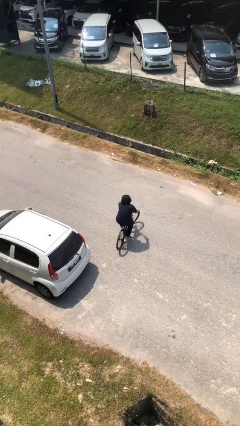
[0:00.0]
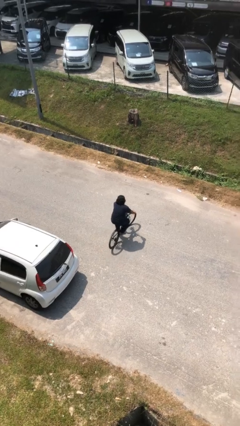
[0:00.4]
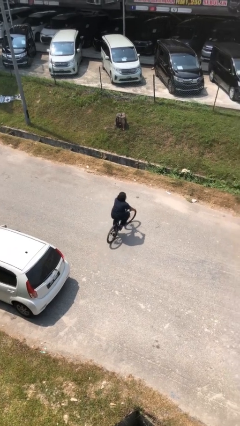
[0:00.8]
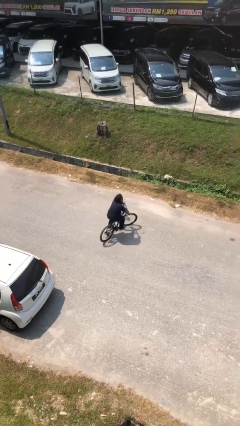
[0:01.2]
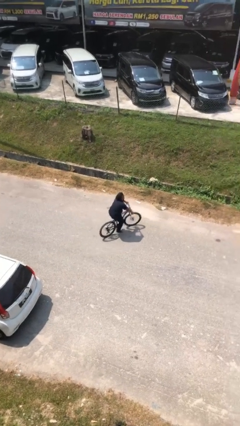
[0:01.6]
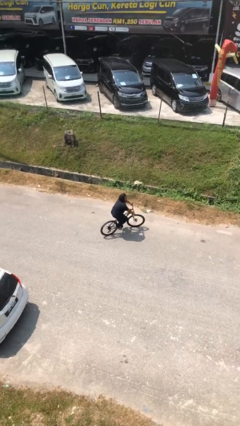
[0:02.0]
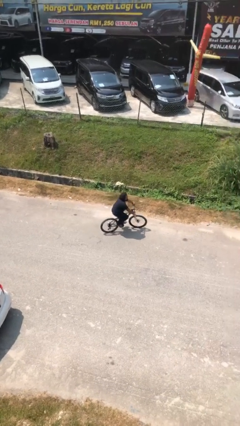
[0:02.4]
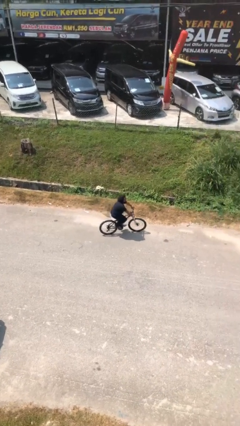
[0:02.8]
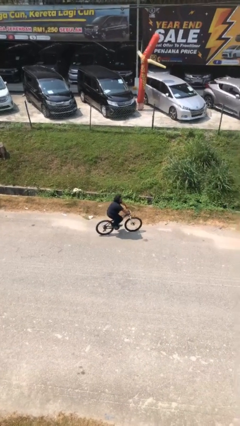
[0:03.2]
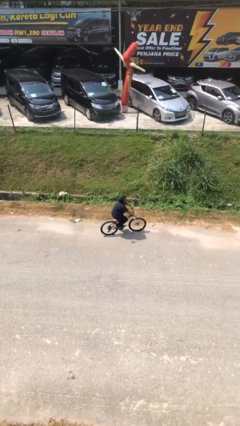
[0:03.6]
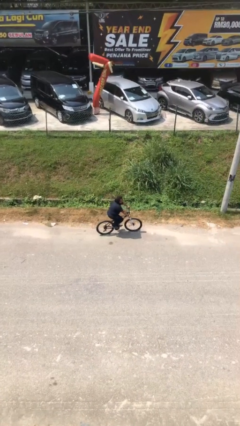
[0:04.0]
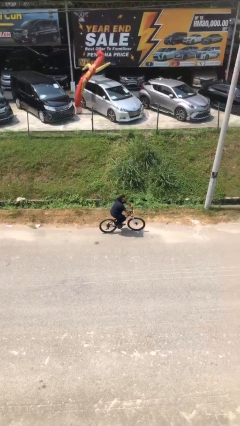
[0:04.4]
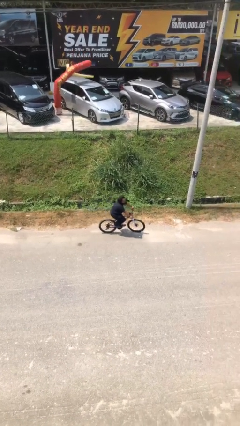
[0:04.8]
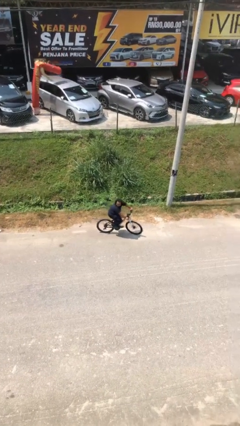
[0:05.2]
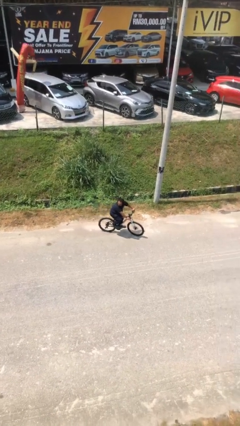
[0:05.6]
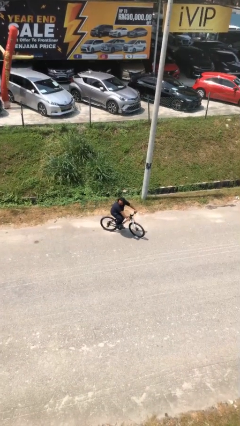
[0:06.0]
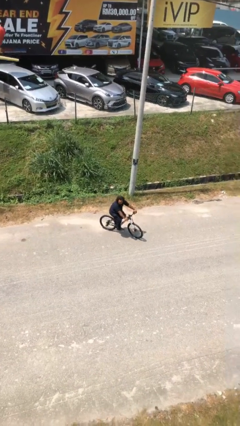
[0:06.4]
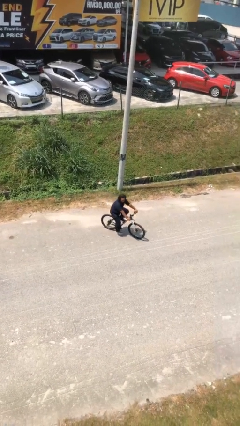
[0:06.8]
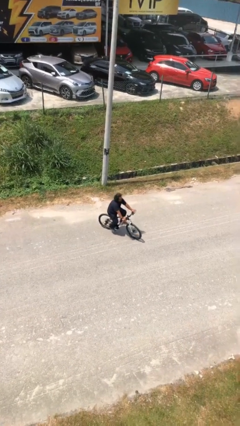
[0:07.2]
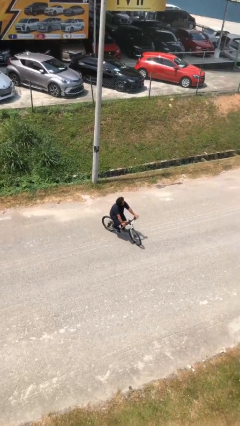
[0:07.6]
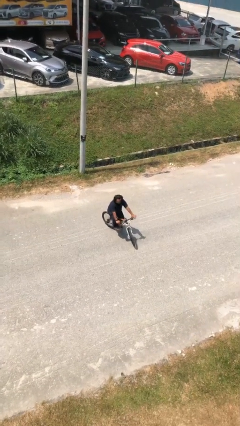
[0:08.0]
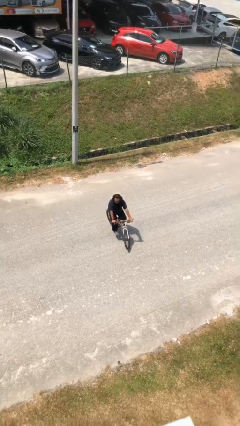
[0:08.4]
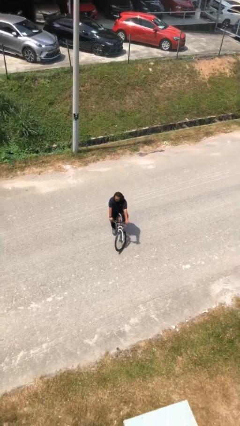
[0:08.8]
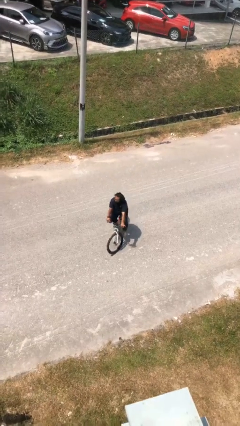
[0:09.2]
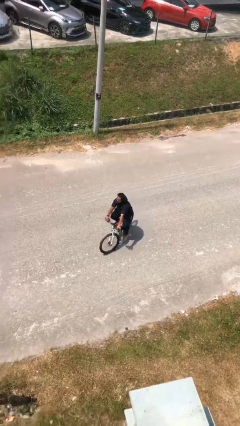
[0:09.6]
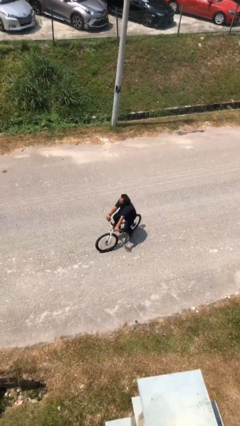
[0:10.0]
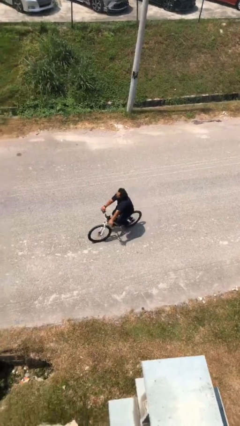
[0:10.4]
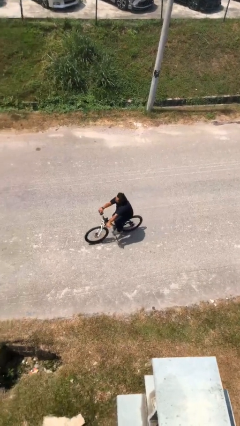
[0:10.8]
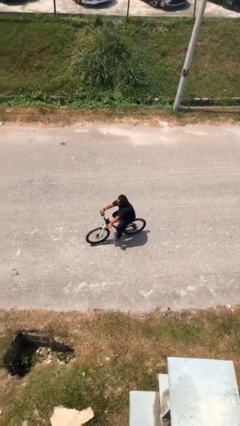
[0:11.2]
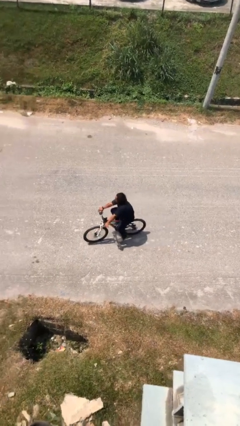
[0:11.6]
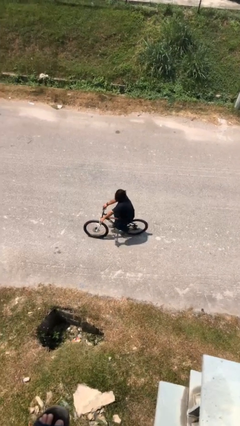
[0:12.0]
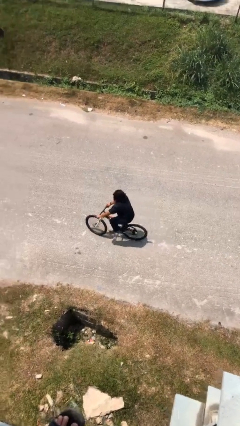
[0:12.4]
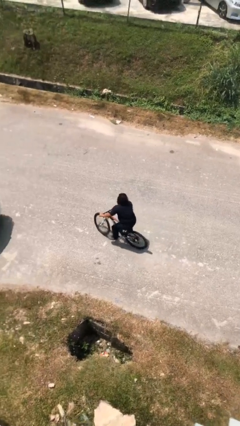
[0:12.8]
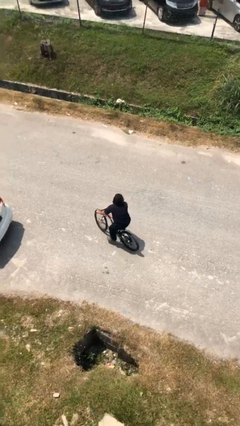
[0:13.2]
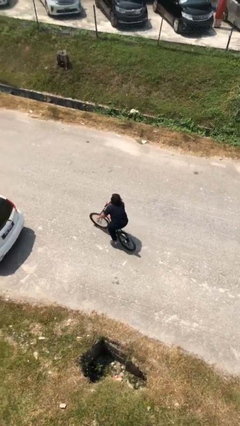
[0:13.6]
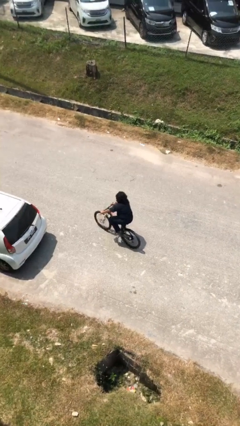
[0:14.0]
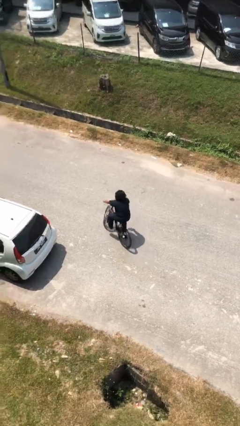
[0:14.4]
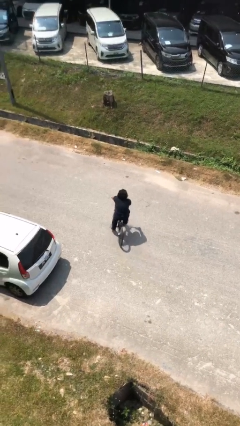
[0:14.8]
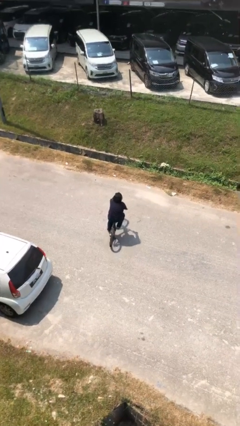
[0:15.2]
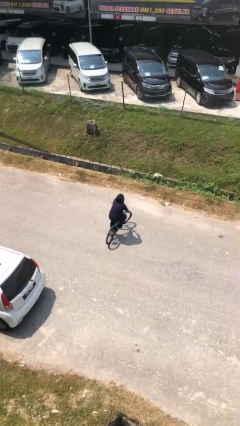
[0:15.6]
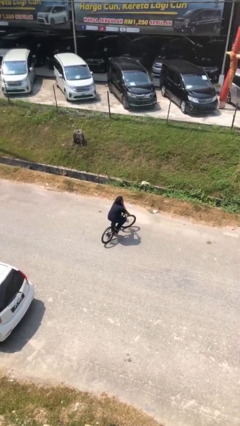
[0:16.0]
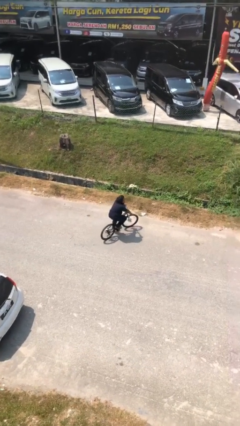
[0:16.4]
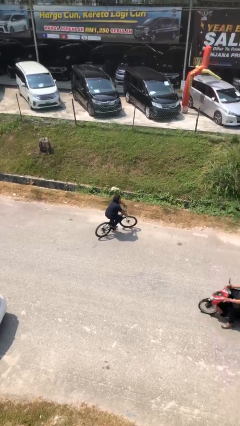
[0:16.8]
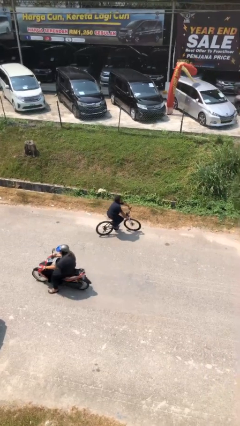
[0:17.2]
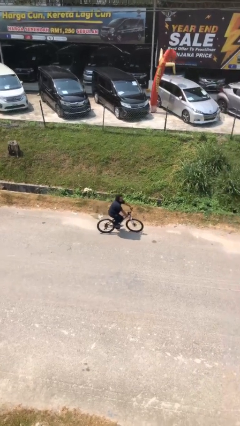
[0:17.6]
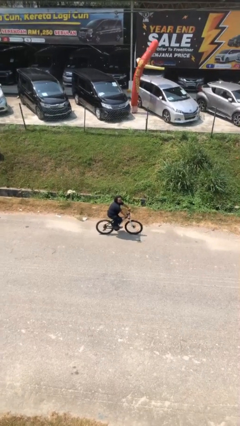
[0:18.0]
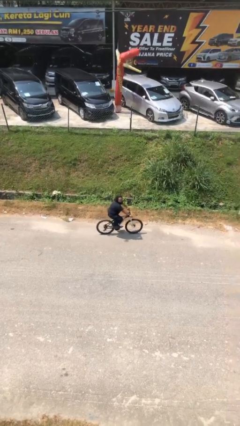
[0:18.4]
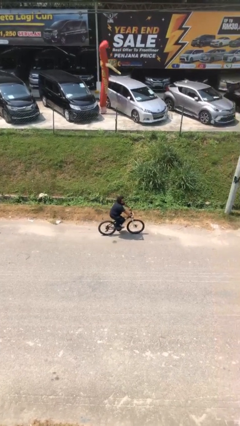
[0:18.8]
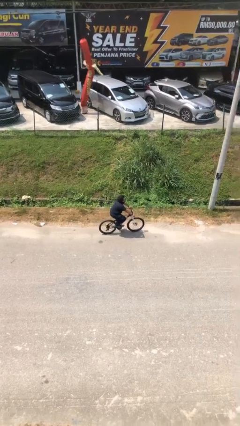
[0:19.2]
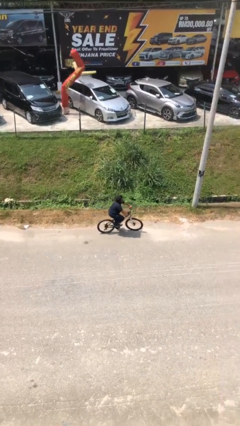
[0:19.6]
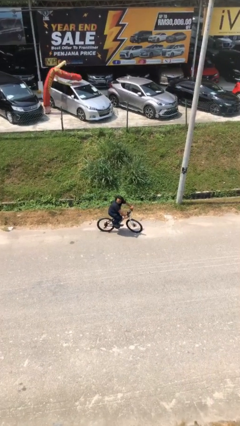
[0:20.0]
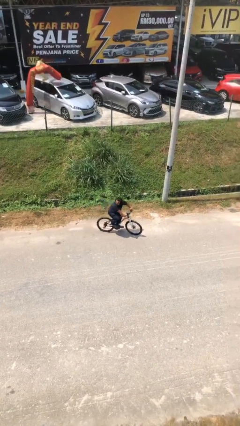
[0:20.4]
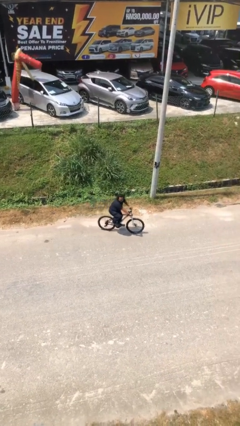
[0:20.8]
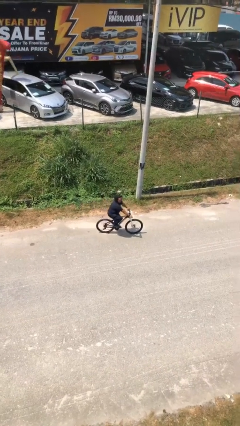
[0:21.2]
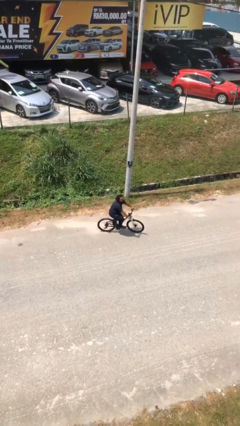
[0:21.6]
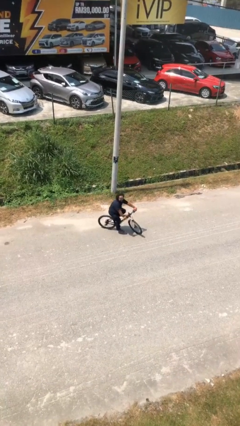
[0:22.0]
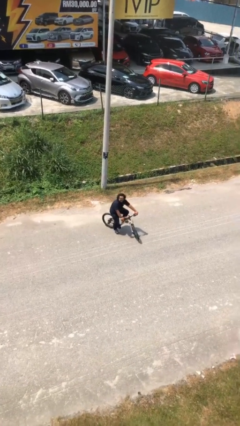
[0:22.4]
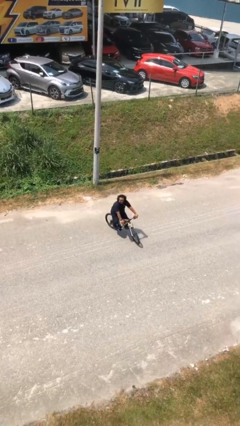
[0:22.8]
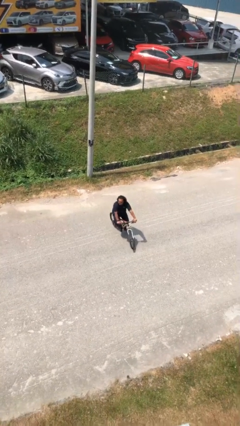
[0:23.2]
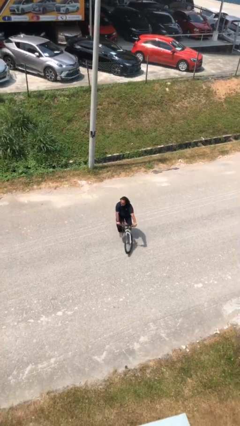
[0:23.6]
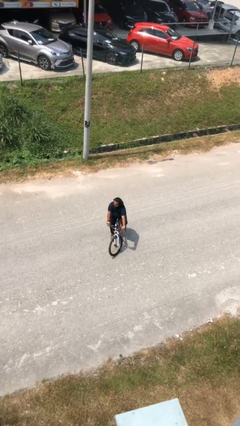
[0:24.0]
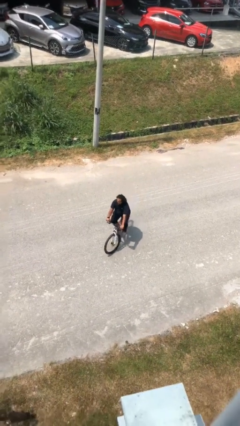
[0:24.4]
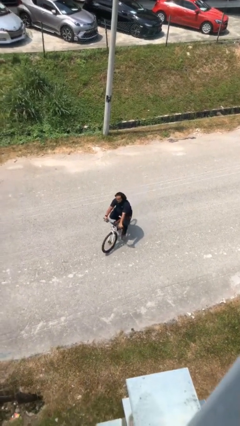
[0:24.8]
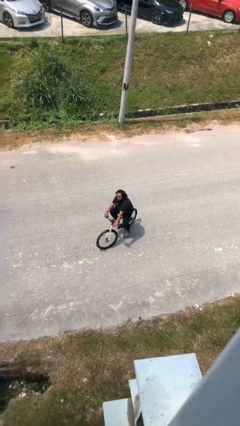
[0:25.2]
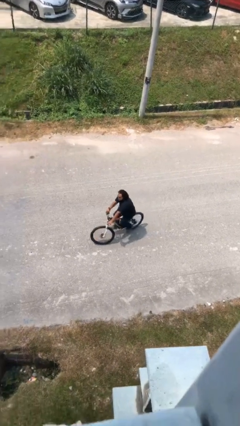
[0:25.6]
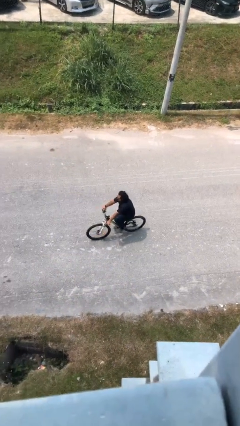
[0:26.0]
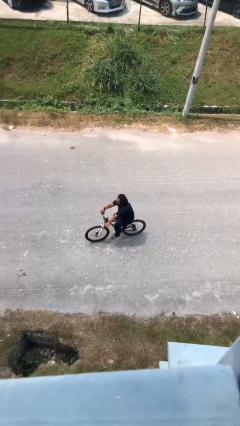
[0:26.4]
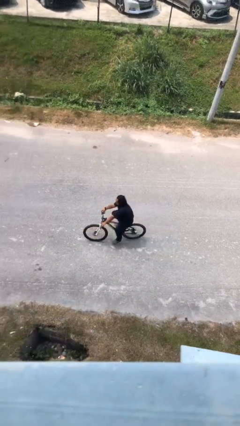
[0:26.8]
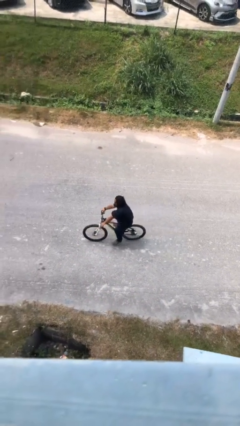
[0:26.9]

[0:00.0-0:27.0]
person rides bicycle

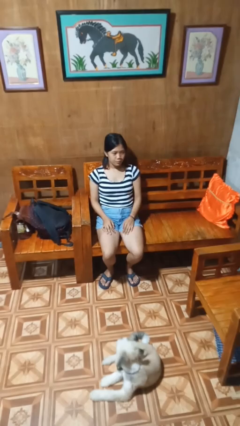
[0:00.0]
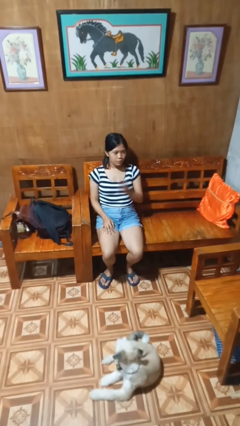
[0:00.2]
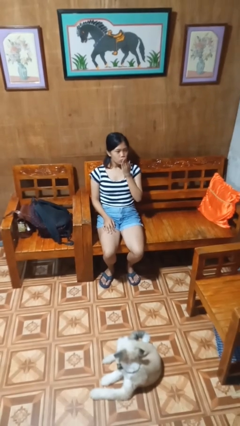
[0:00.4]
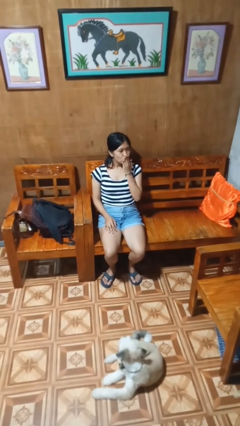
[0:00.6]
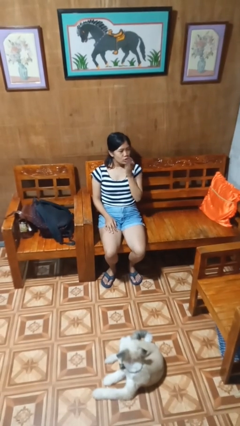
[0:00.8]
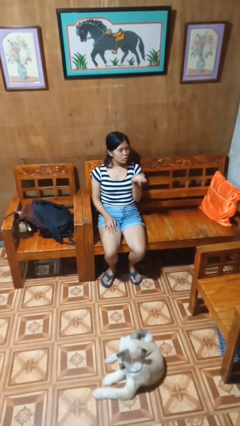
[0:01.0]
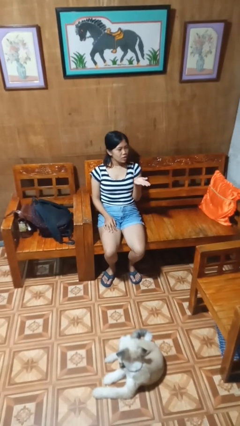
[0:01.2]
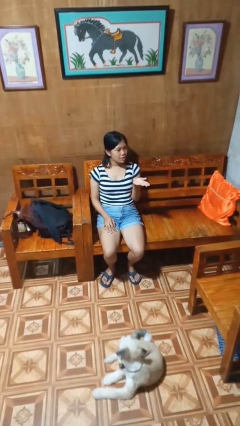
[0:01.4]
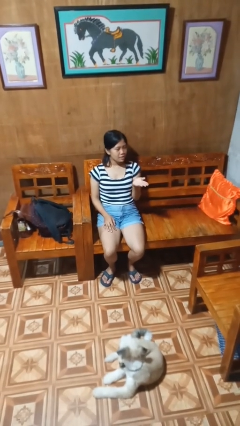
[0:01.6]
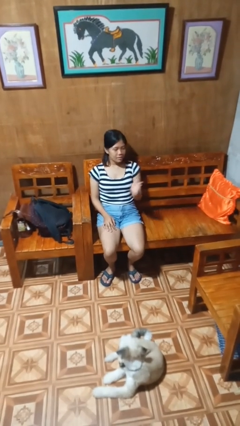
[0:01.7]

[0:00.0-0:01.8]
person gestures blow kiss

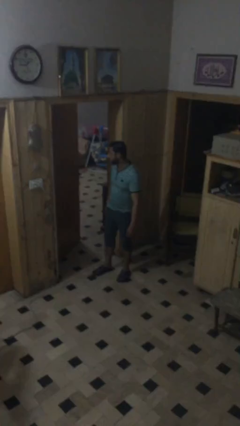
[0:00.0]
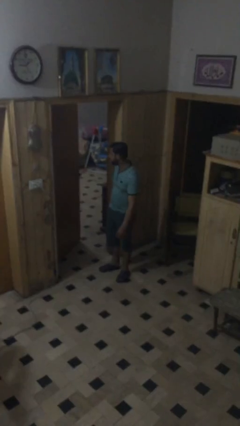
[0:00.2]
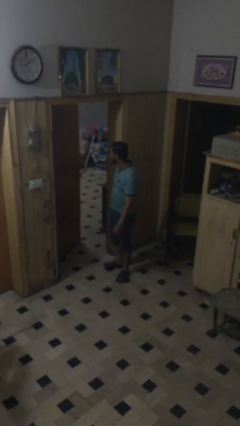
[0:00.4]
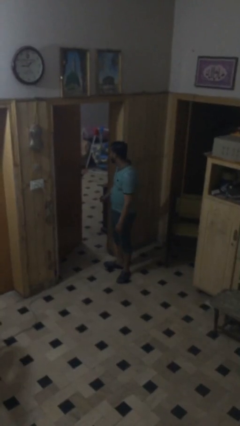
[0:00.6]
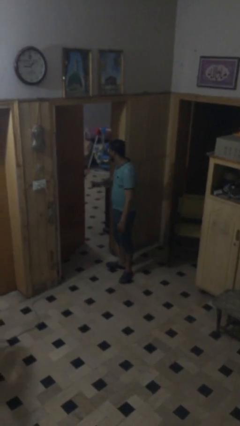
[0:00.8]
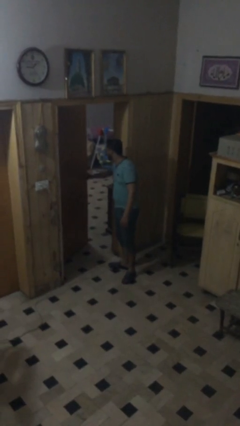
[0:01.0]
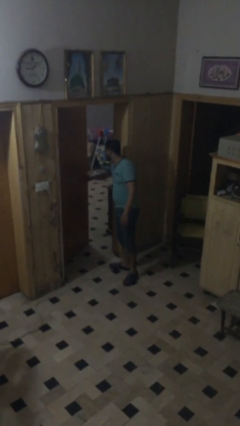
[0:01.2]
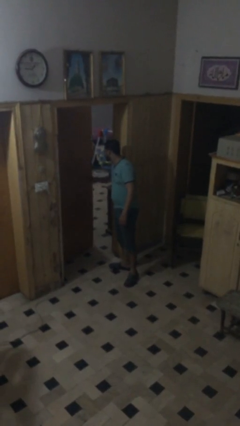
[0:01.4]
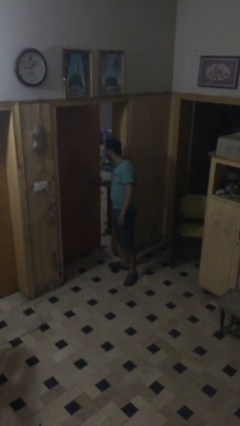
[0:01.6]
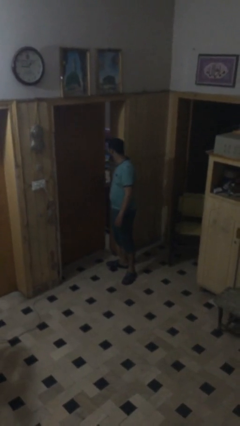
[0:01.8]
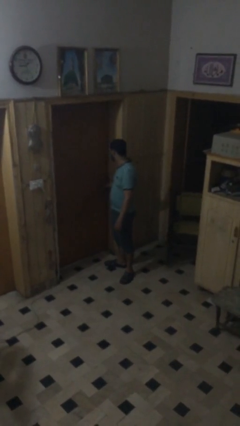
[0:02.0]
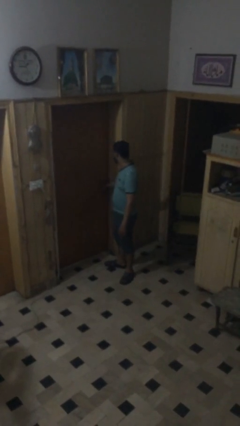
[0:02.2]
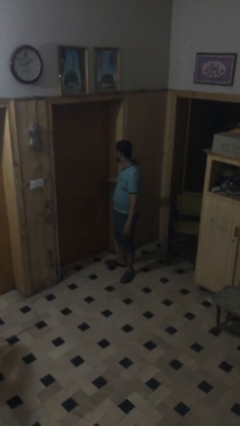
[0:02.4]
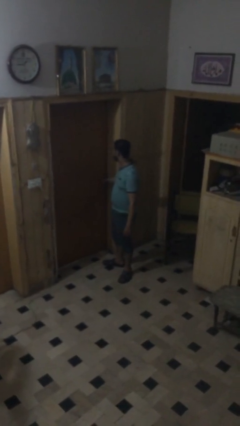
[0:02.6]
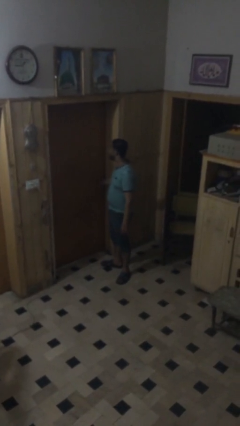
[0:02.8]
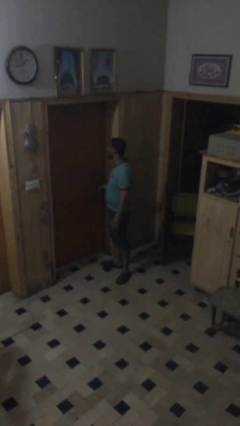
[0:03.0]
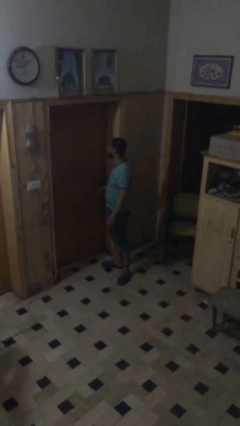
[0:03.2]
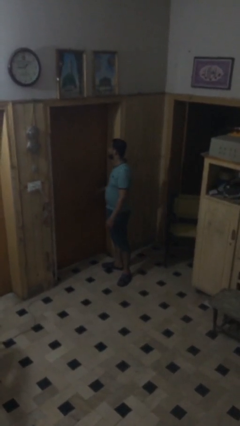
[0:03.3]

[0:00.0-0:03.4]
person closes facility door
